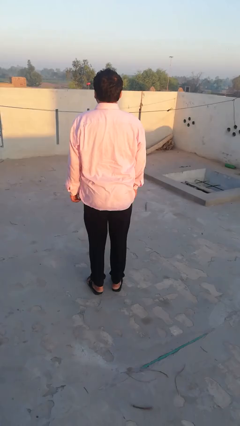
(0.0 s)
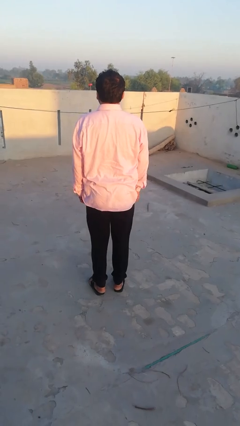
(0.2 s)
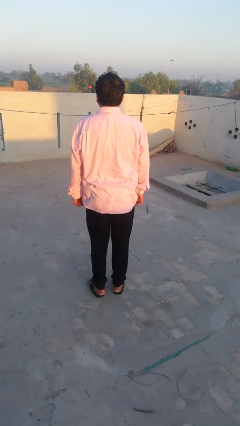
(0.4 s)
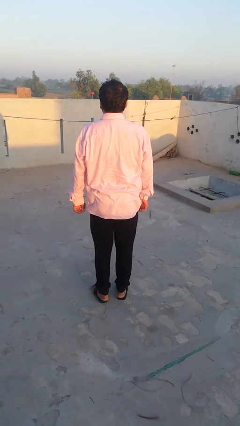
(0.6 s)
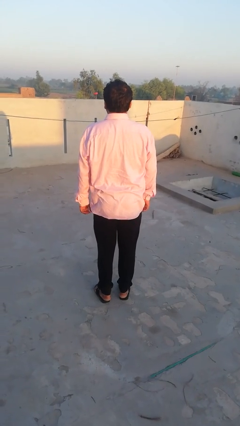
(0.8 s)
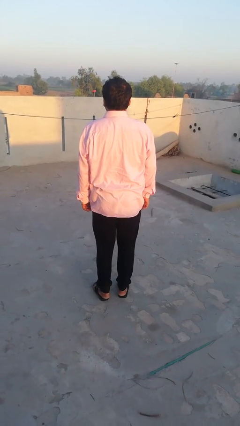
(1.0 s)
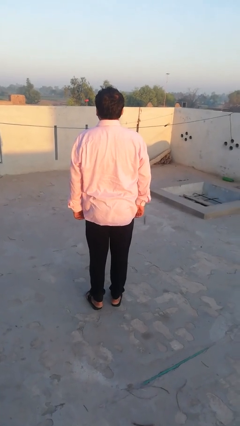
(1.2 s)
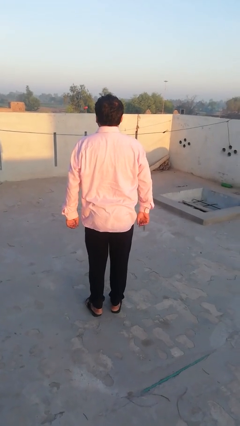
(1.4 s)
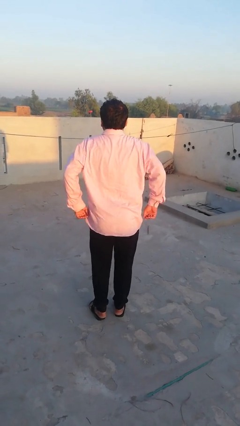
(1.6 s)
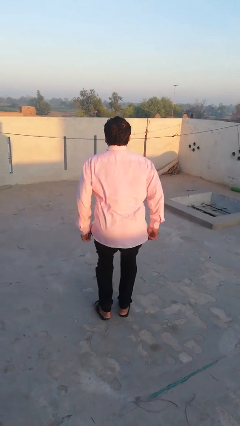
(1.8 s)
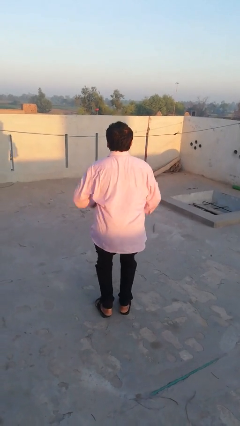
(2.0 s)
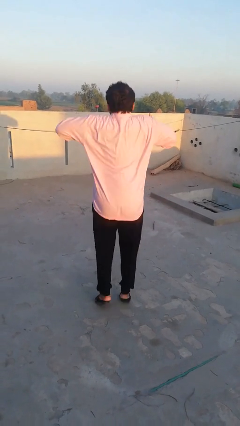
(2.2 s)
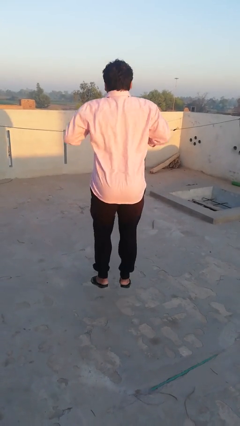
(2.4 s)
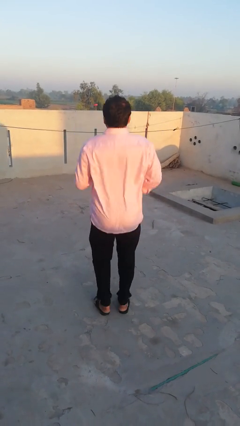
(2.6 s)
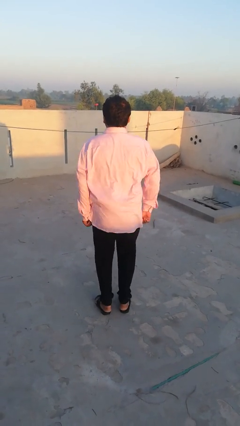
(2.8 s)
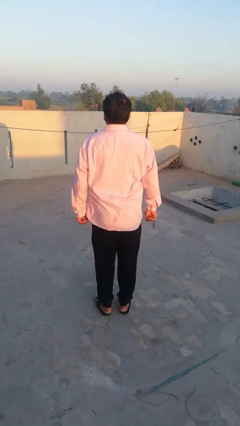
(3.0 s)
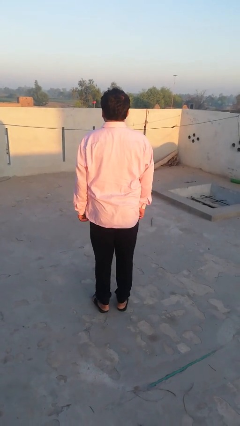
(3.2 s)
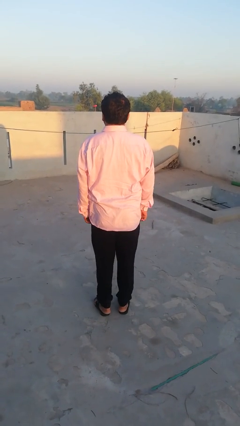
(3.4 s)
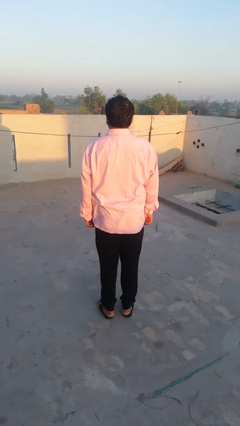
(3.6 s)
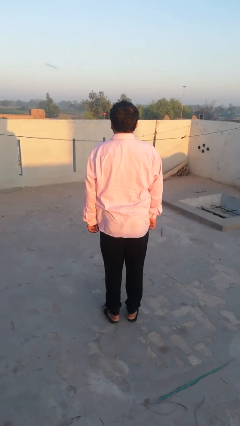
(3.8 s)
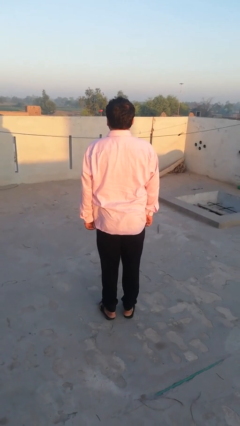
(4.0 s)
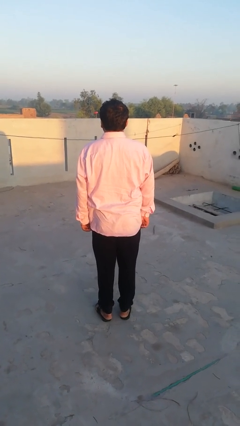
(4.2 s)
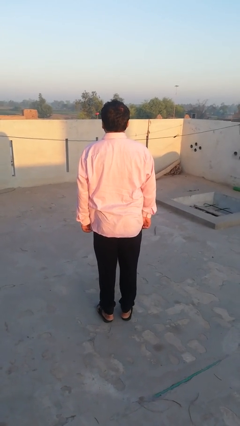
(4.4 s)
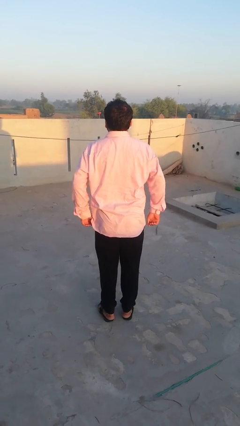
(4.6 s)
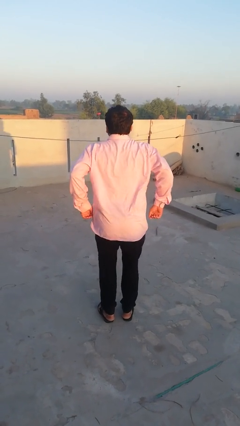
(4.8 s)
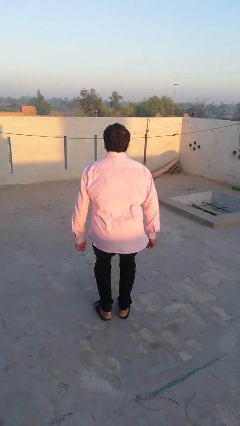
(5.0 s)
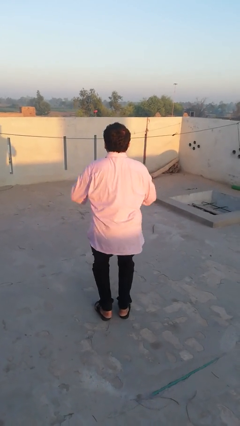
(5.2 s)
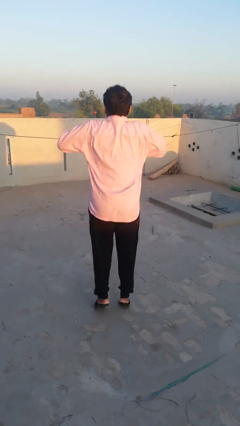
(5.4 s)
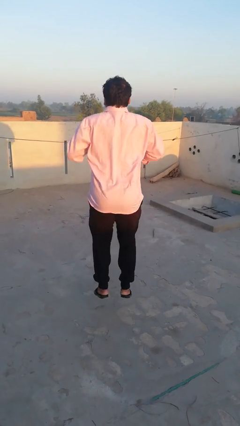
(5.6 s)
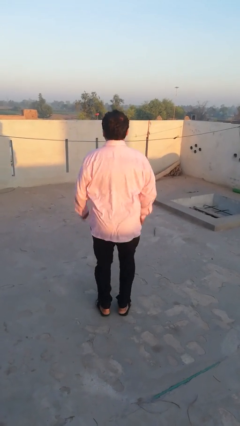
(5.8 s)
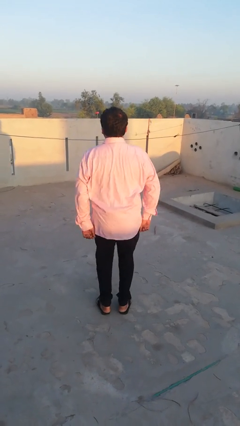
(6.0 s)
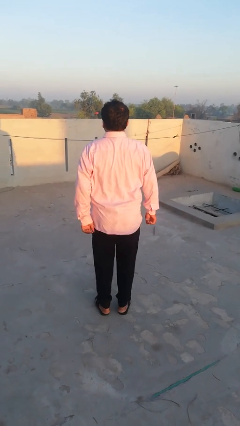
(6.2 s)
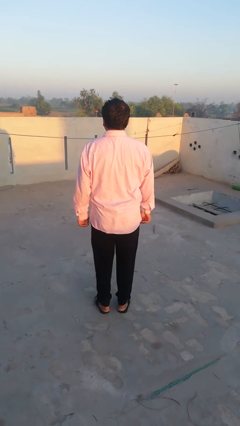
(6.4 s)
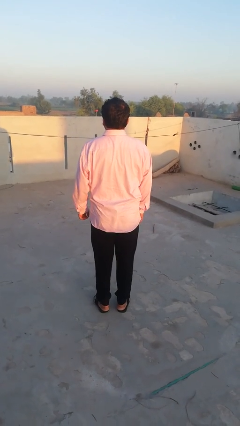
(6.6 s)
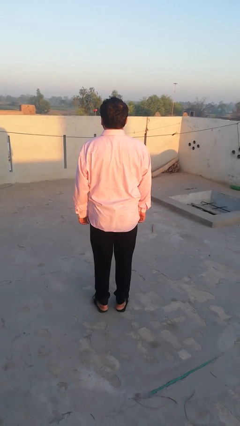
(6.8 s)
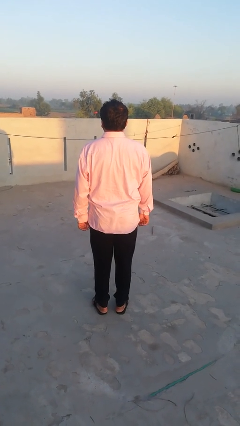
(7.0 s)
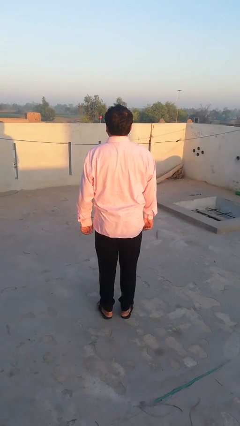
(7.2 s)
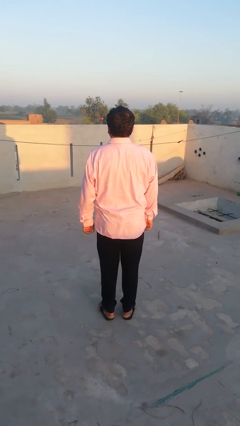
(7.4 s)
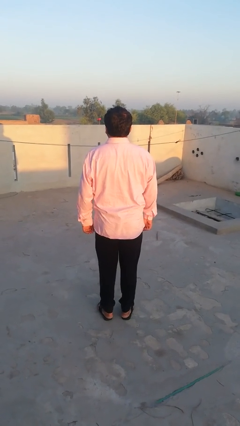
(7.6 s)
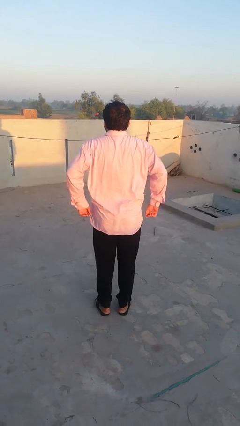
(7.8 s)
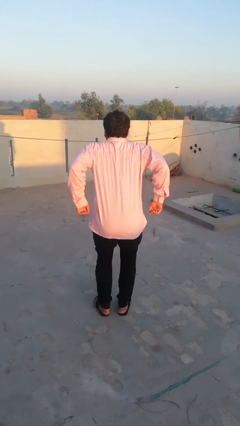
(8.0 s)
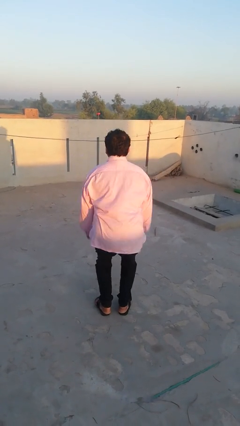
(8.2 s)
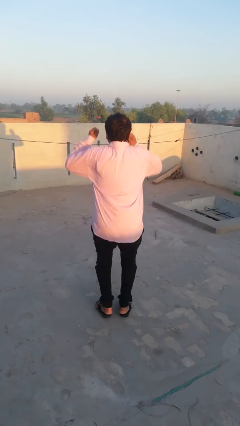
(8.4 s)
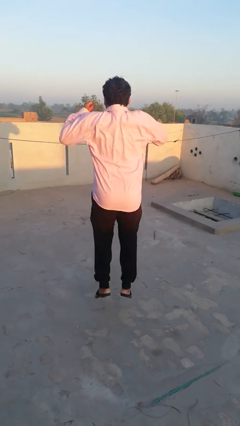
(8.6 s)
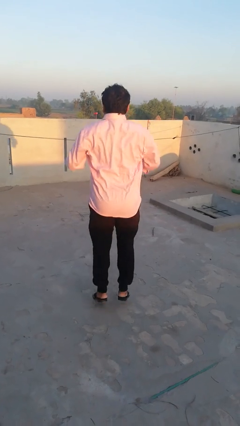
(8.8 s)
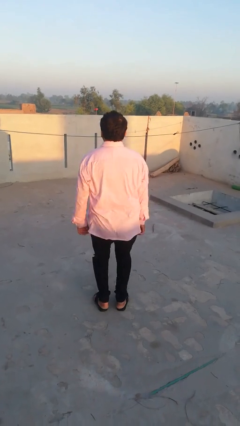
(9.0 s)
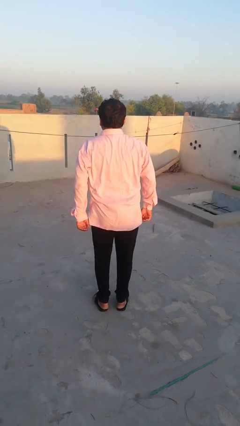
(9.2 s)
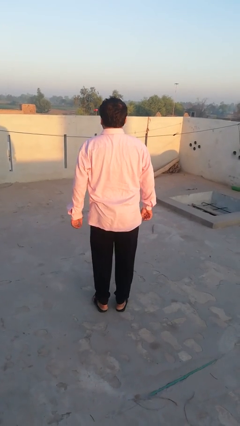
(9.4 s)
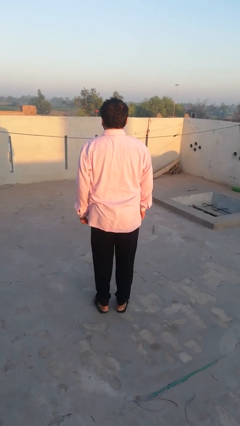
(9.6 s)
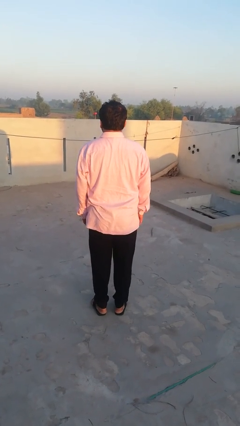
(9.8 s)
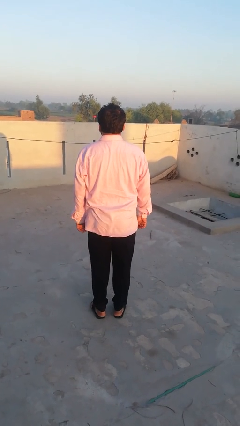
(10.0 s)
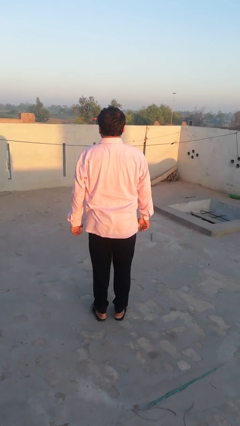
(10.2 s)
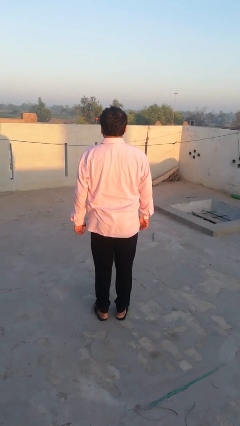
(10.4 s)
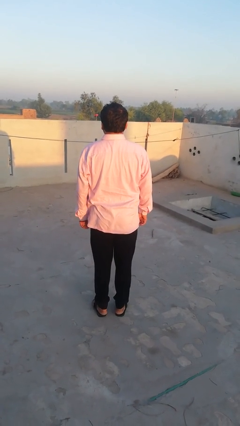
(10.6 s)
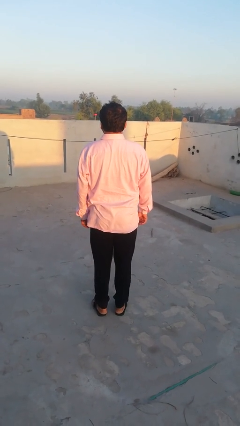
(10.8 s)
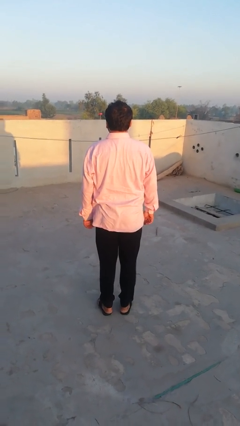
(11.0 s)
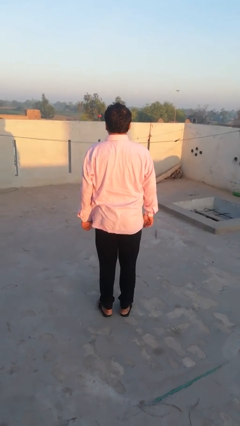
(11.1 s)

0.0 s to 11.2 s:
person jumps

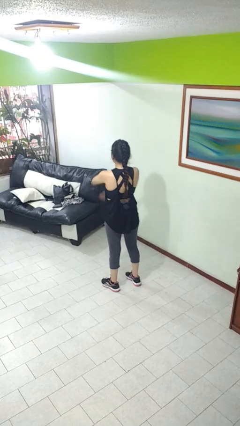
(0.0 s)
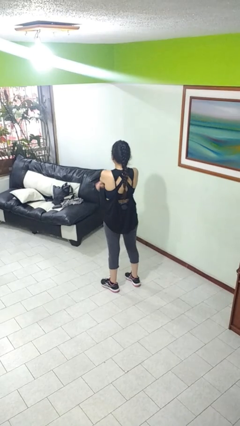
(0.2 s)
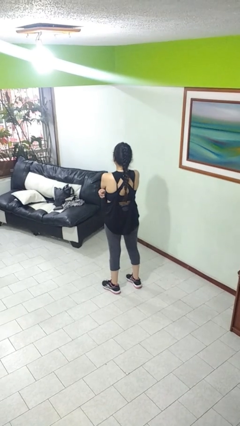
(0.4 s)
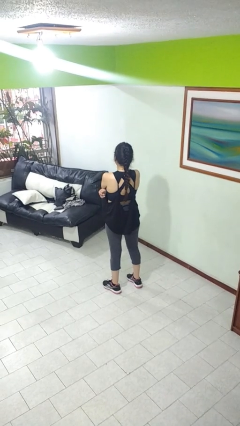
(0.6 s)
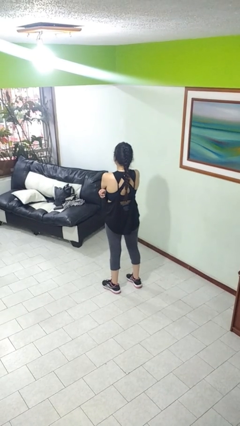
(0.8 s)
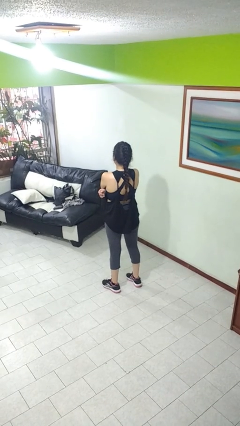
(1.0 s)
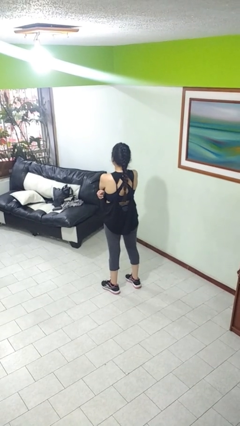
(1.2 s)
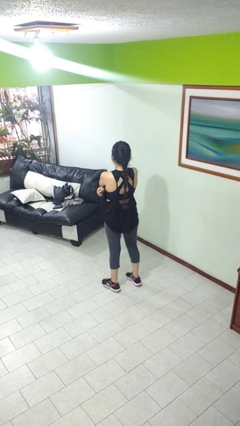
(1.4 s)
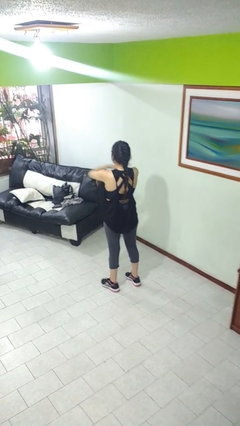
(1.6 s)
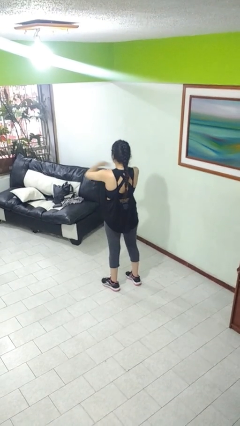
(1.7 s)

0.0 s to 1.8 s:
person crosses arms

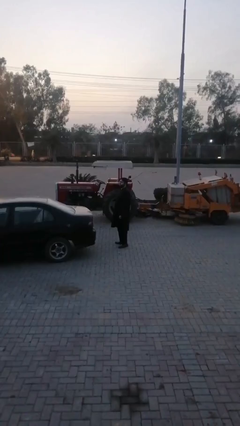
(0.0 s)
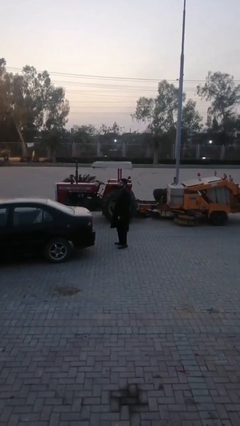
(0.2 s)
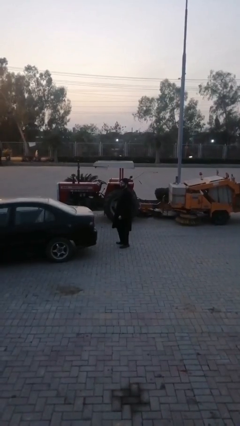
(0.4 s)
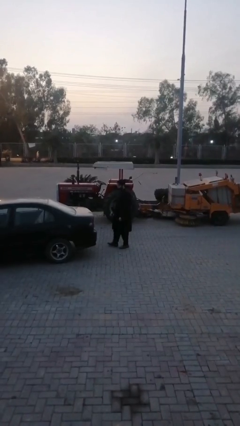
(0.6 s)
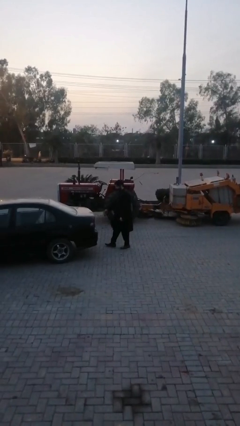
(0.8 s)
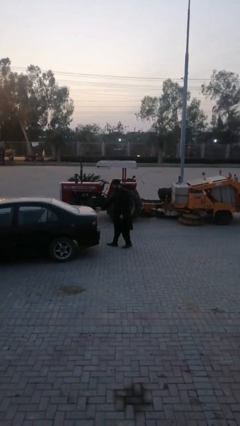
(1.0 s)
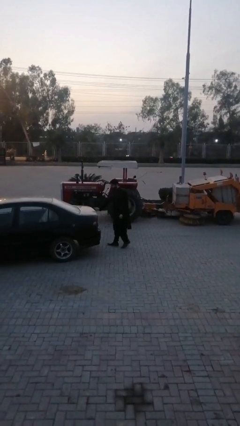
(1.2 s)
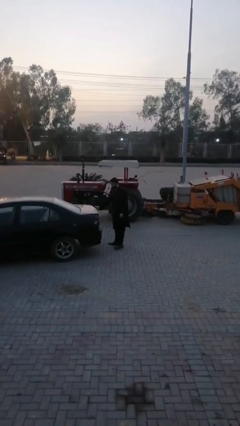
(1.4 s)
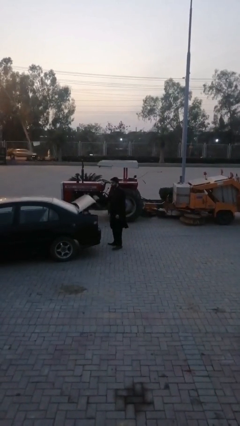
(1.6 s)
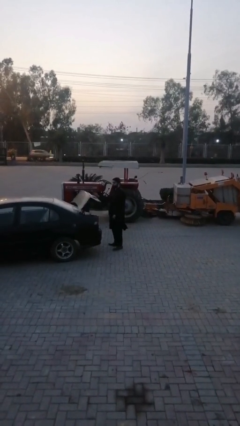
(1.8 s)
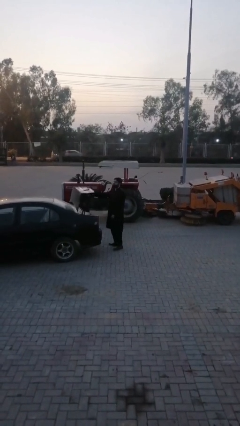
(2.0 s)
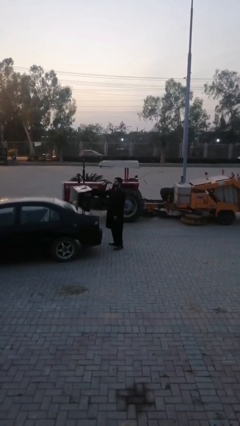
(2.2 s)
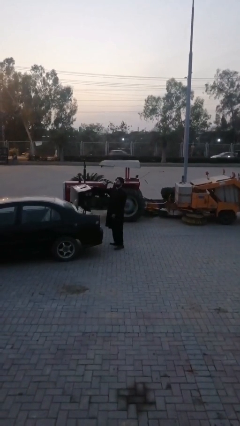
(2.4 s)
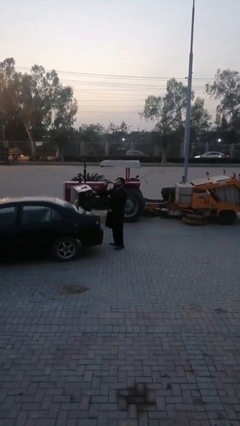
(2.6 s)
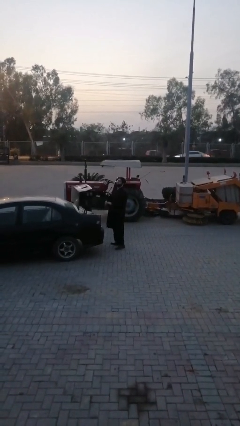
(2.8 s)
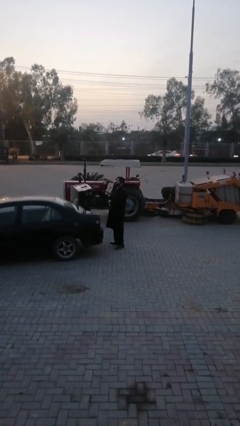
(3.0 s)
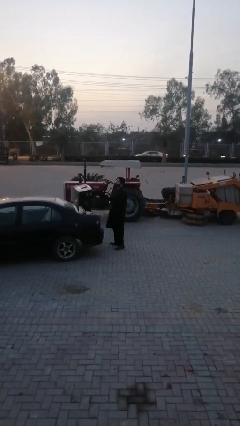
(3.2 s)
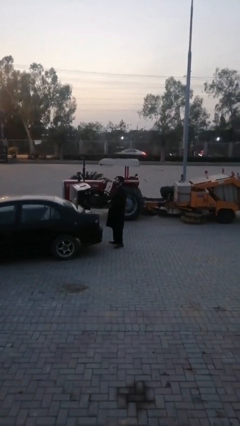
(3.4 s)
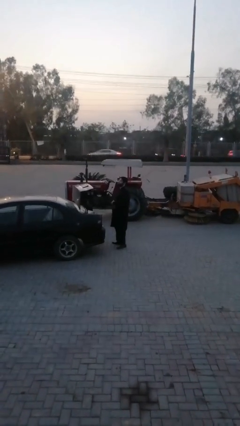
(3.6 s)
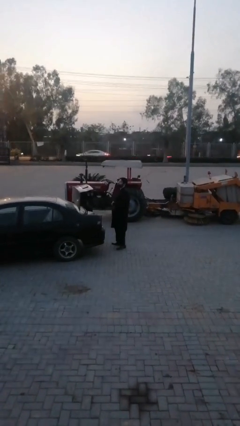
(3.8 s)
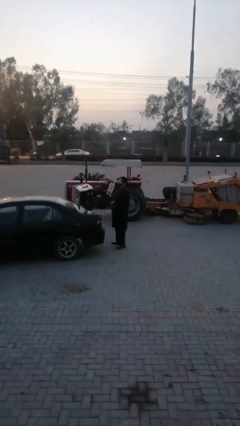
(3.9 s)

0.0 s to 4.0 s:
person opens car trunk

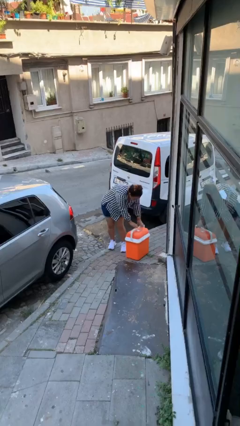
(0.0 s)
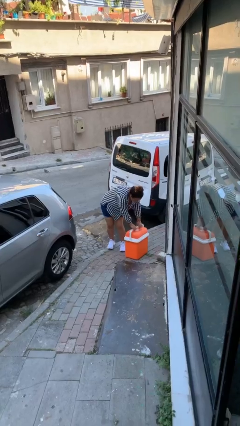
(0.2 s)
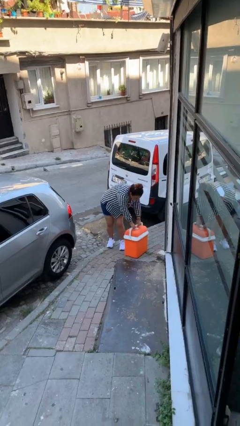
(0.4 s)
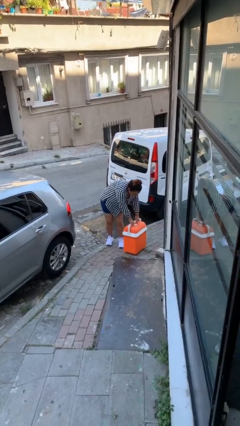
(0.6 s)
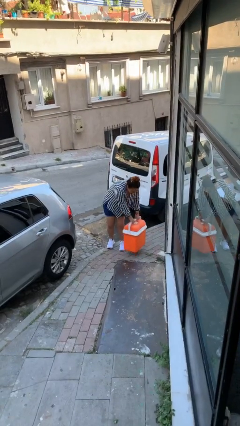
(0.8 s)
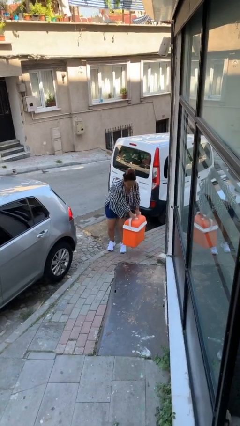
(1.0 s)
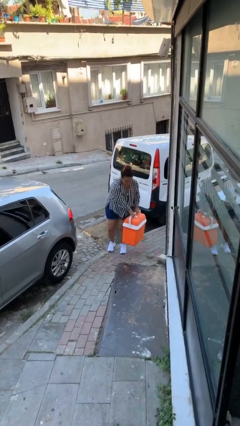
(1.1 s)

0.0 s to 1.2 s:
person picks up object from floor
